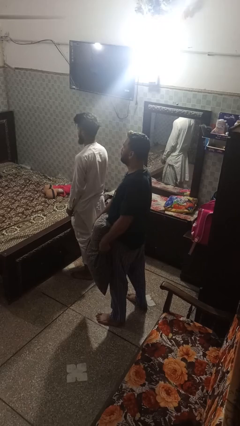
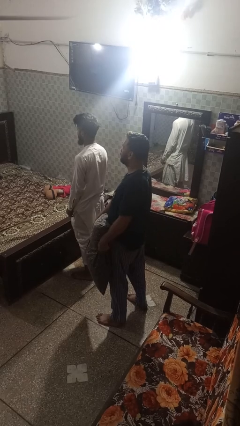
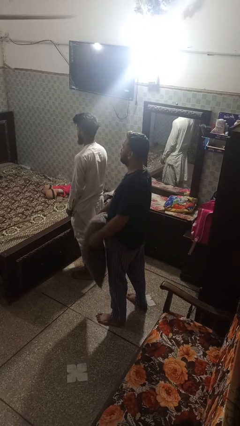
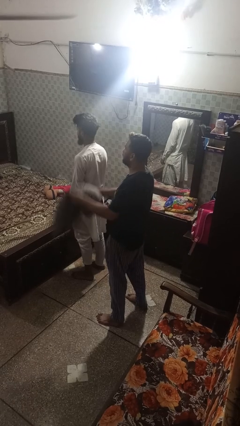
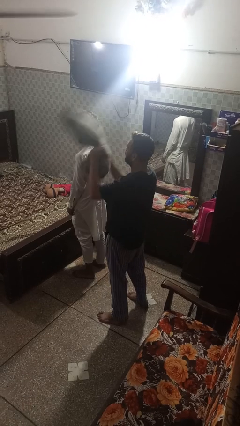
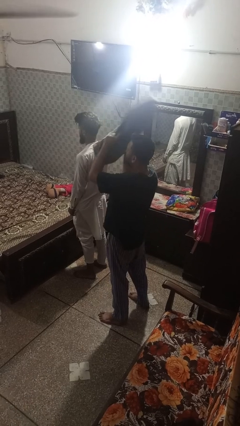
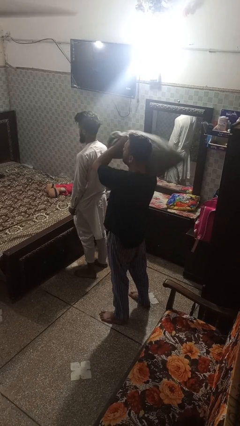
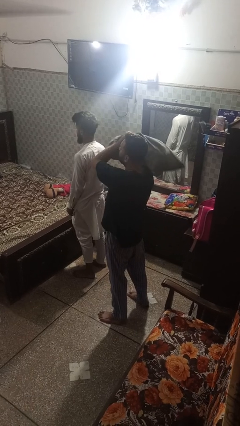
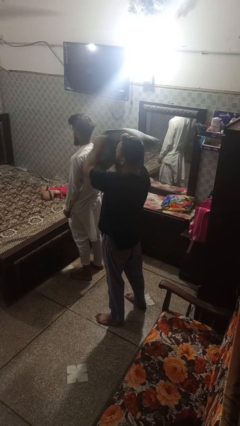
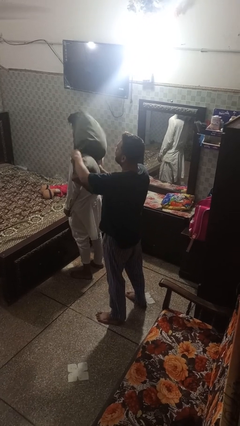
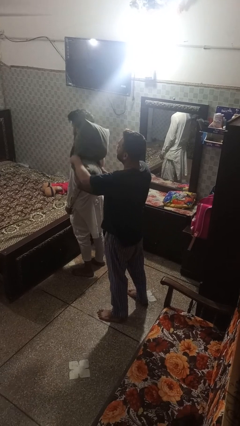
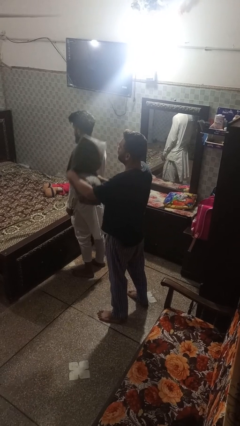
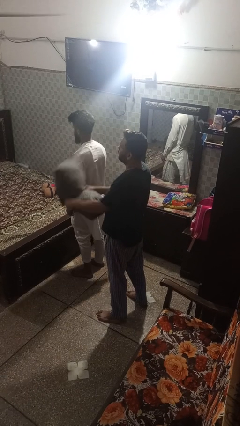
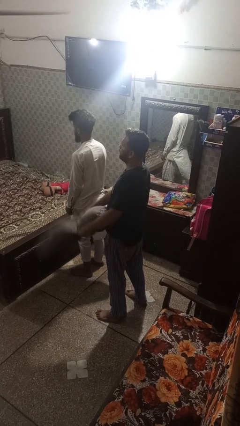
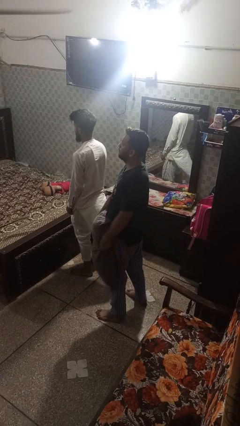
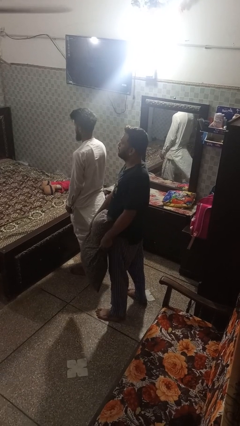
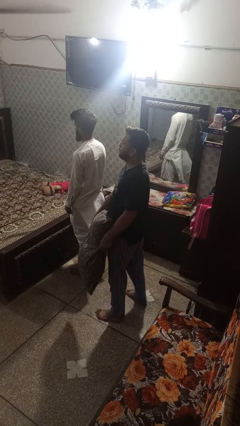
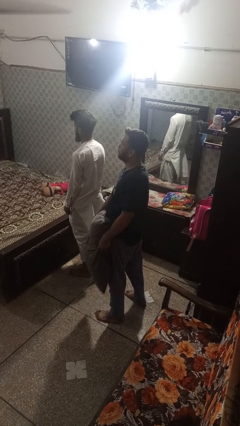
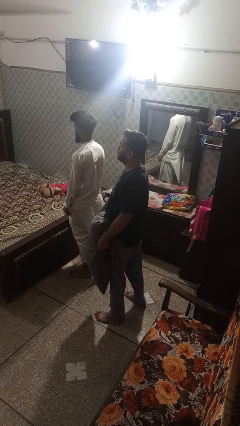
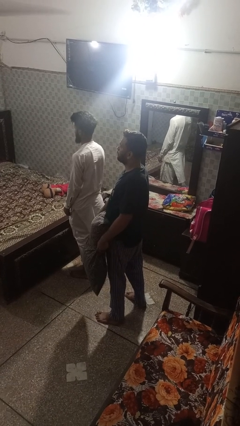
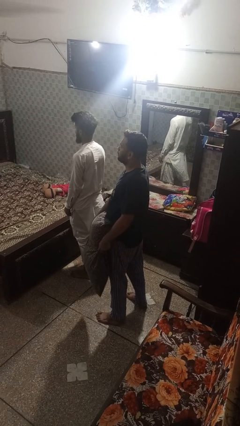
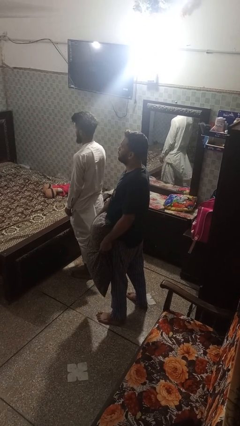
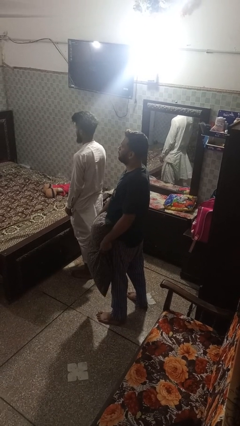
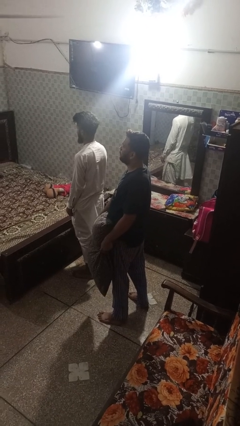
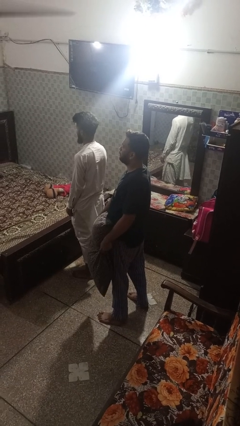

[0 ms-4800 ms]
person hits person with pillow

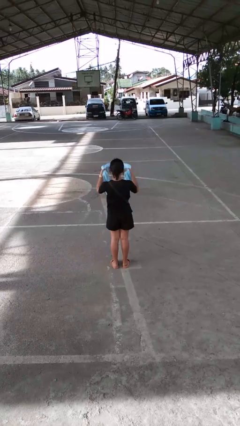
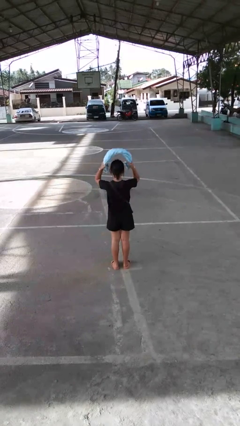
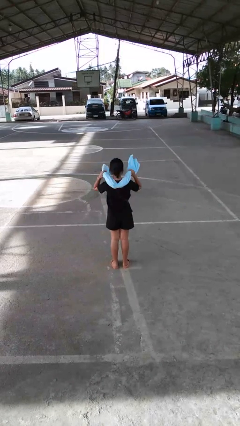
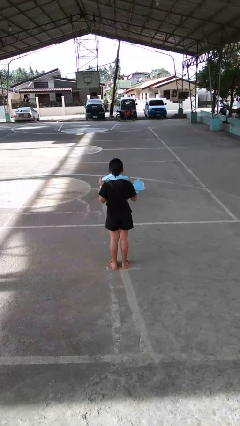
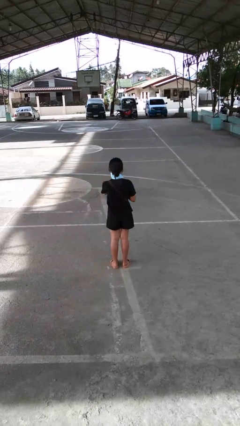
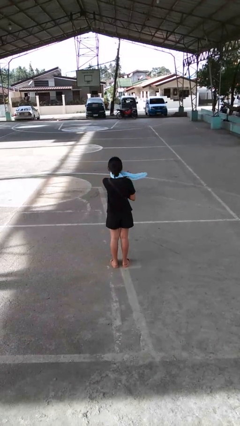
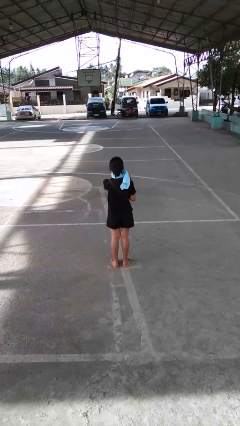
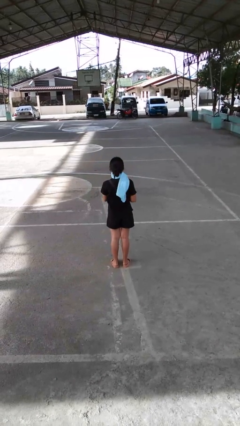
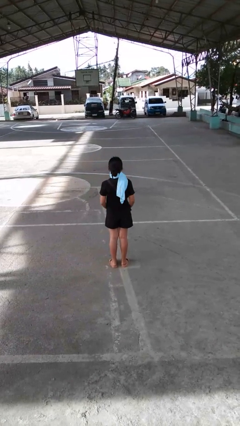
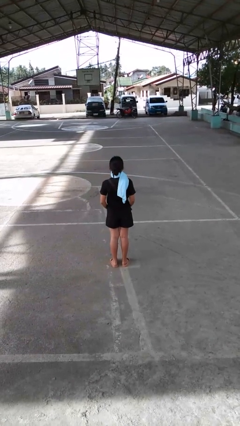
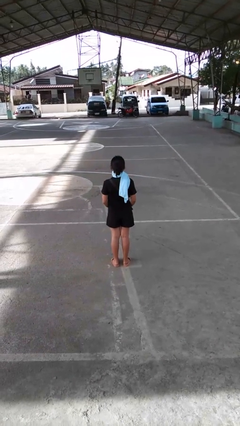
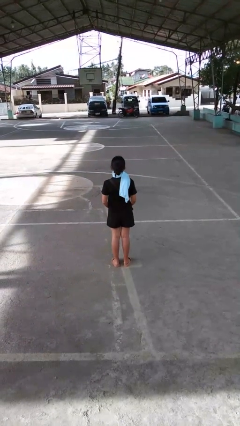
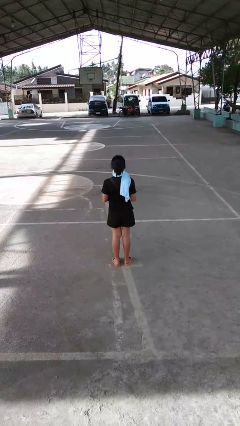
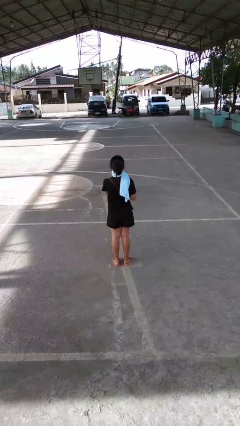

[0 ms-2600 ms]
person puts on scarf

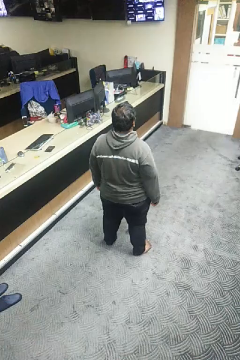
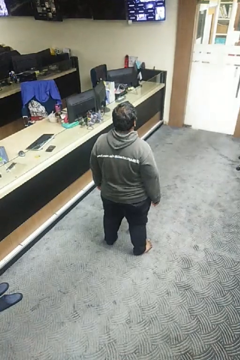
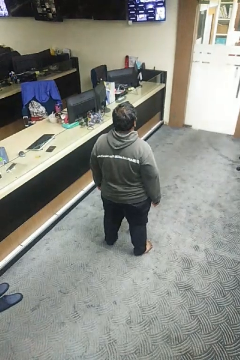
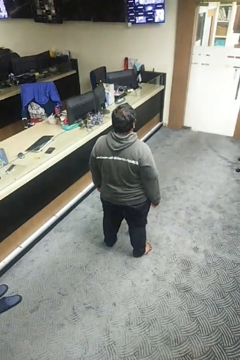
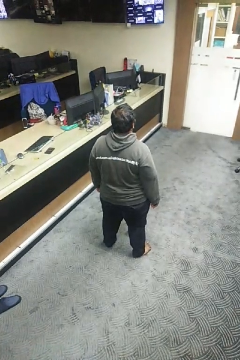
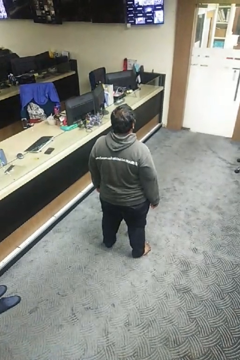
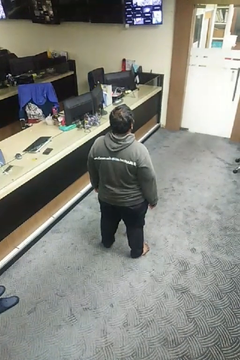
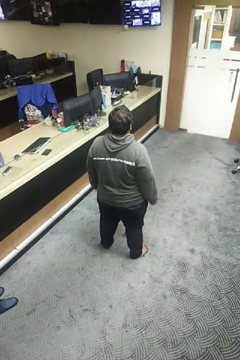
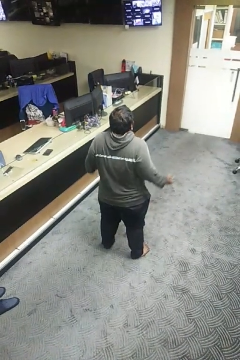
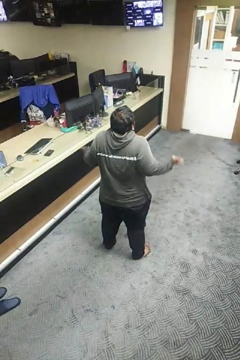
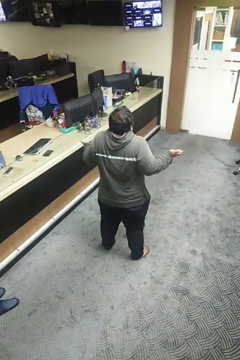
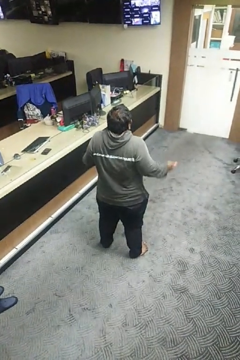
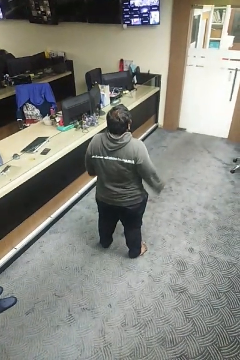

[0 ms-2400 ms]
person shrugs

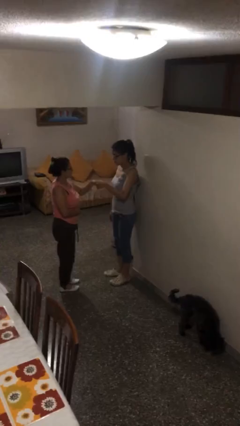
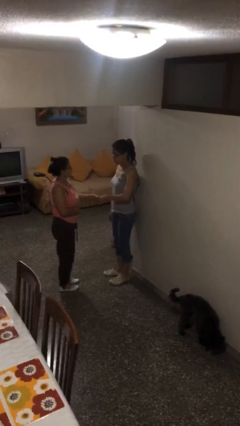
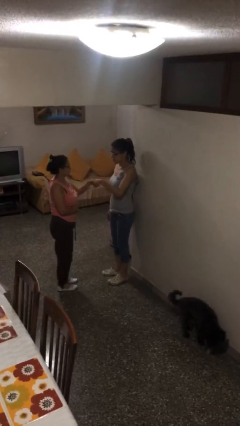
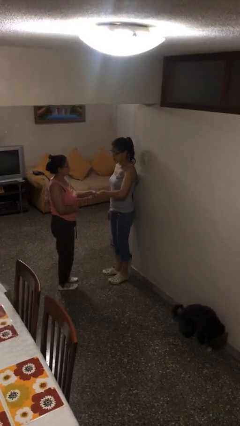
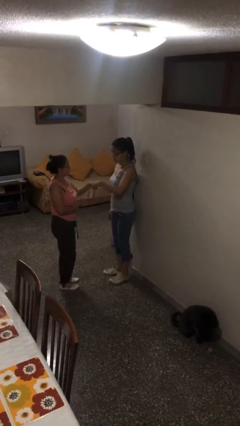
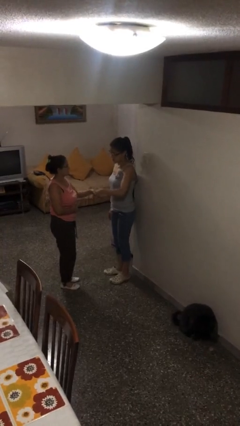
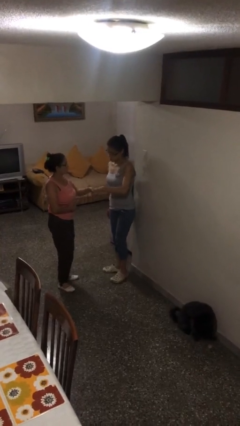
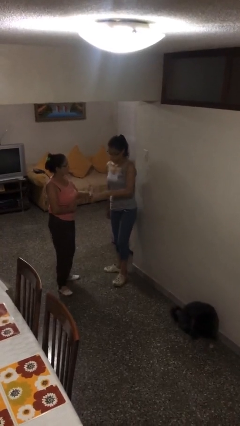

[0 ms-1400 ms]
person shakes hand

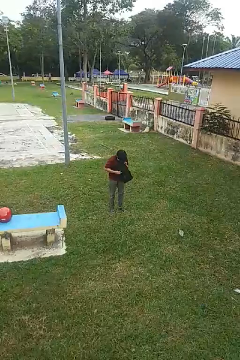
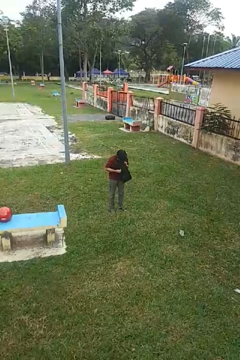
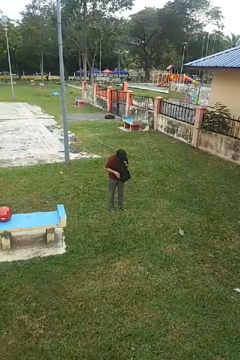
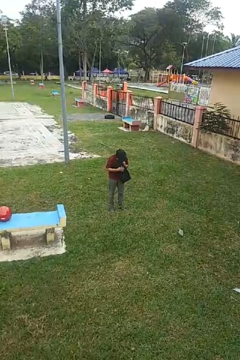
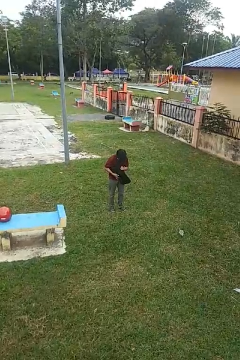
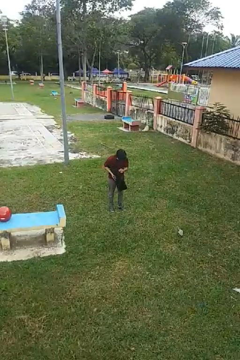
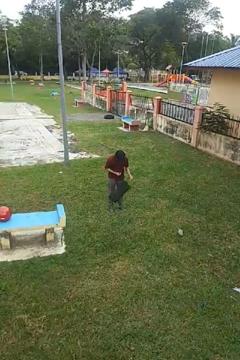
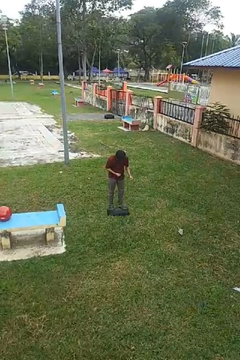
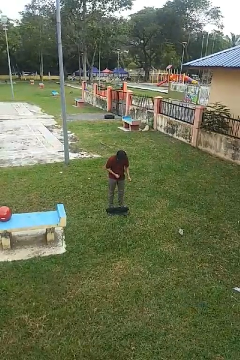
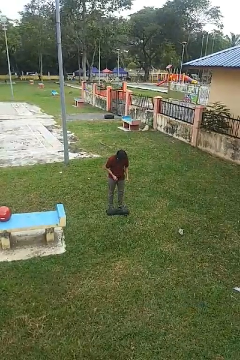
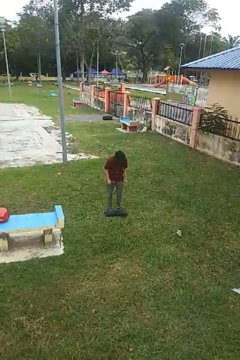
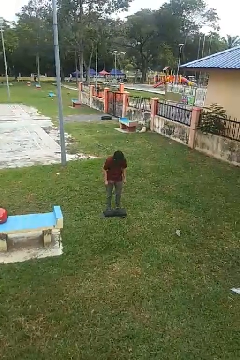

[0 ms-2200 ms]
person drops object

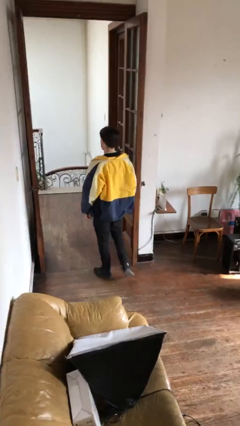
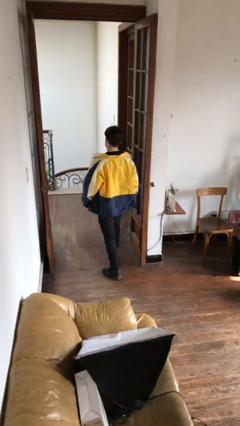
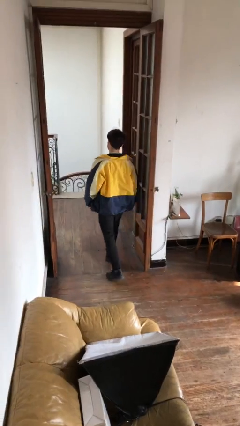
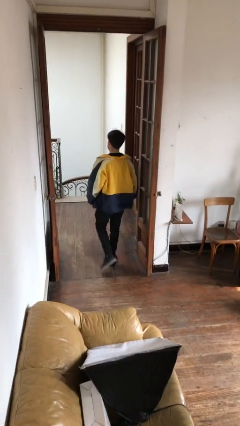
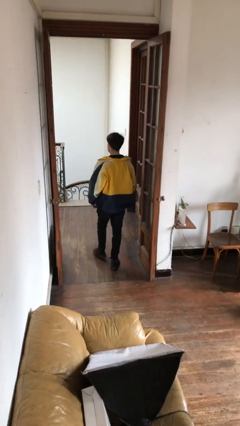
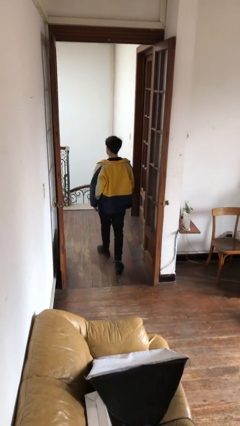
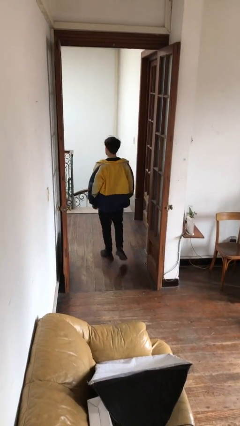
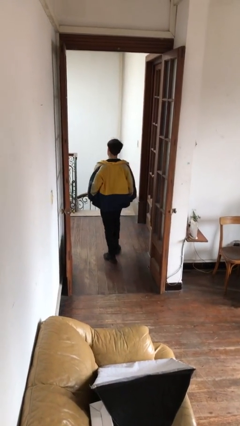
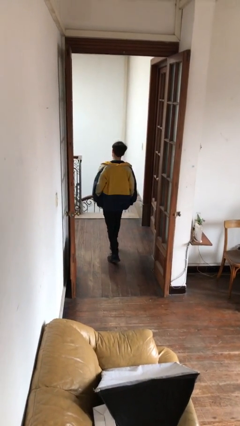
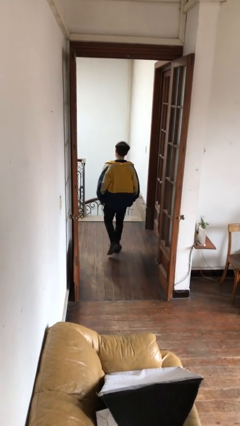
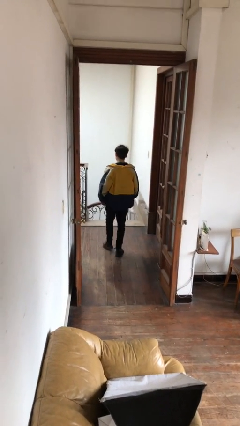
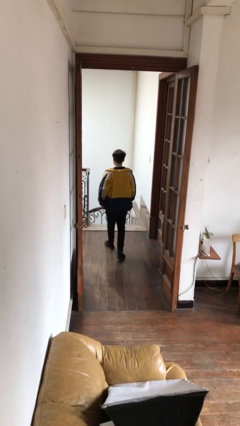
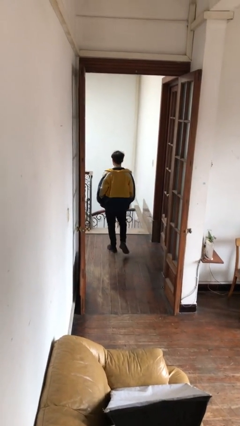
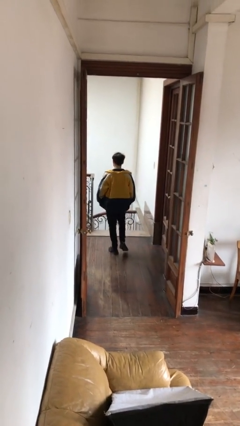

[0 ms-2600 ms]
person exits scene through structure

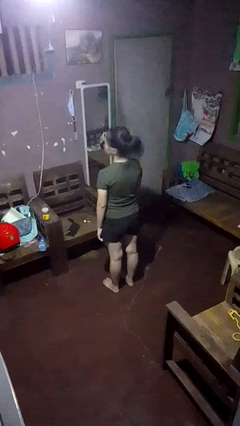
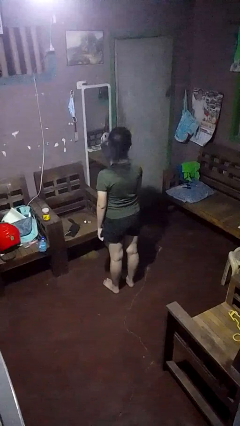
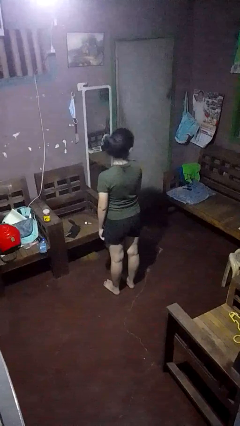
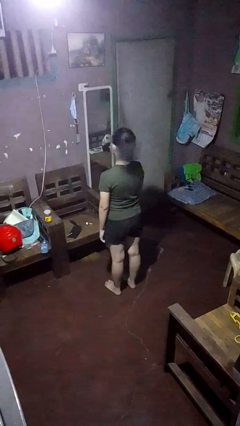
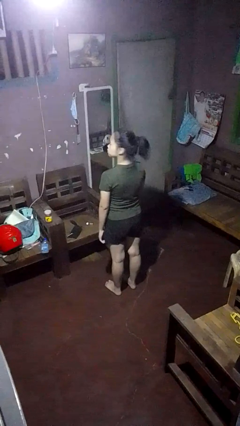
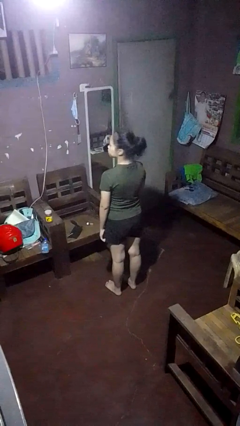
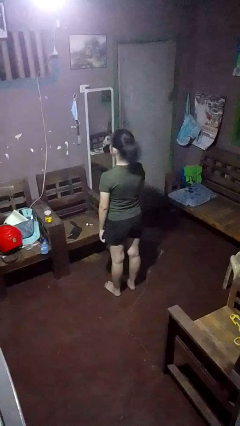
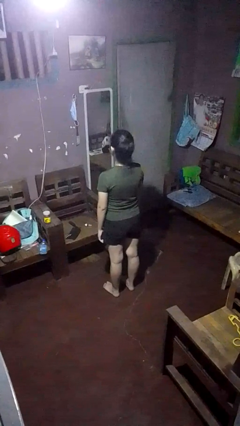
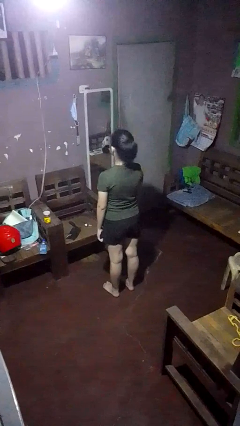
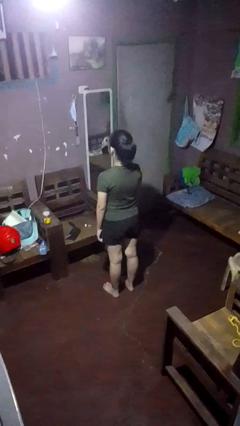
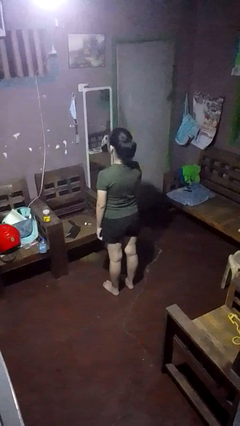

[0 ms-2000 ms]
person shakes head
